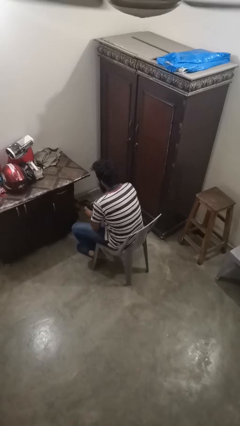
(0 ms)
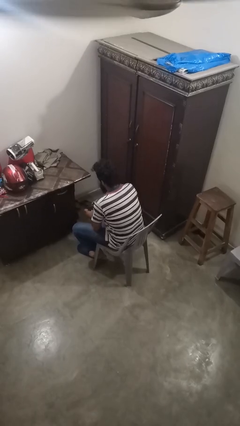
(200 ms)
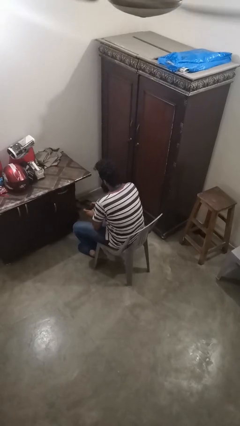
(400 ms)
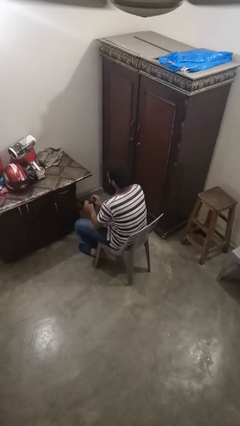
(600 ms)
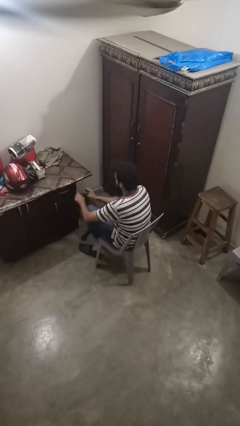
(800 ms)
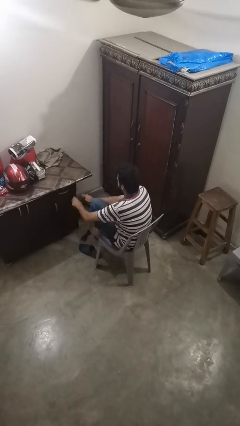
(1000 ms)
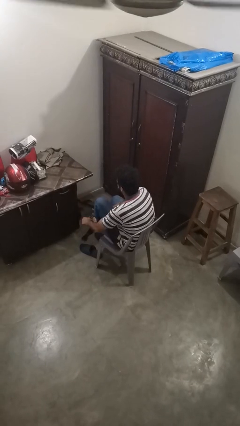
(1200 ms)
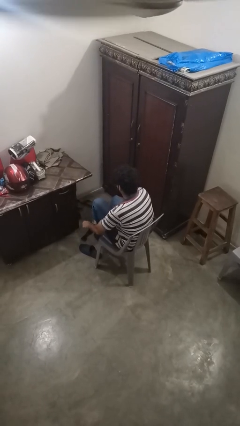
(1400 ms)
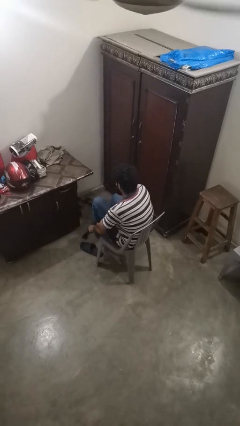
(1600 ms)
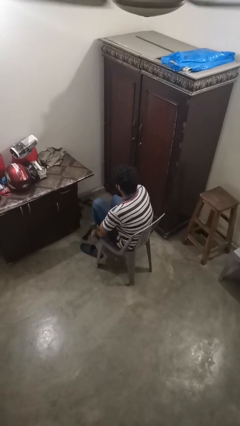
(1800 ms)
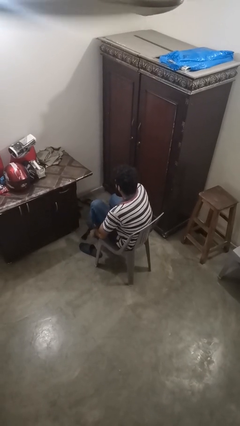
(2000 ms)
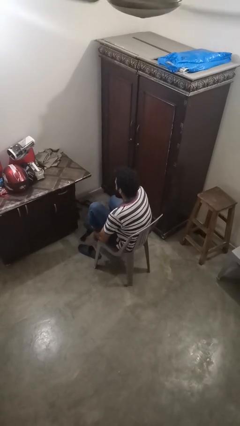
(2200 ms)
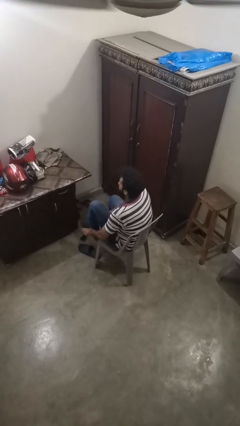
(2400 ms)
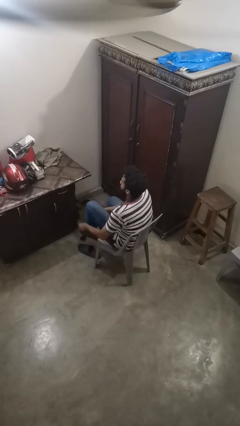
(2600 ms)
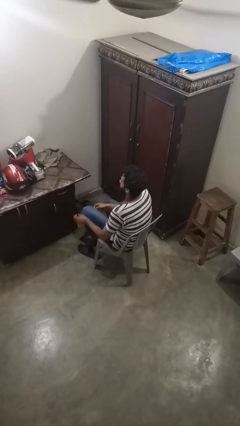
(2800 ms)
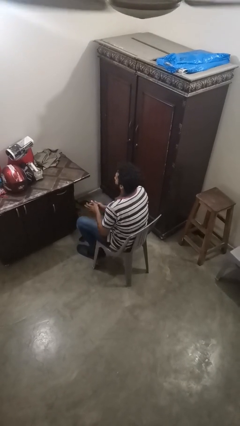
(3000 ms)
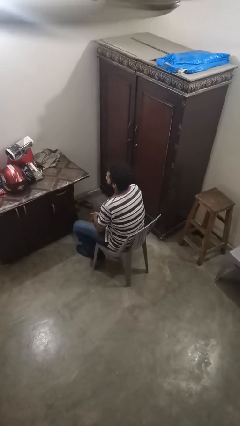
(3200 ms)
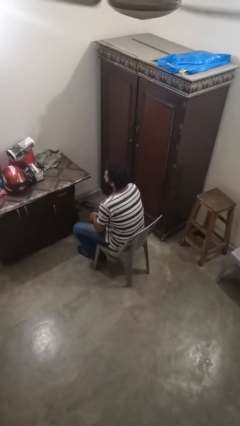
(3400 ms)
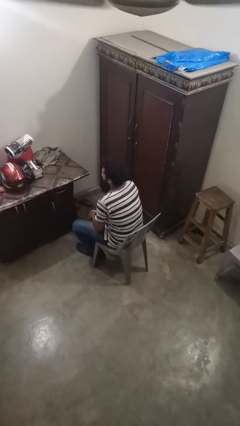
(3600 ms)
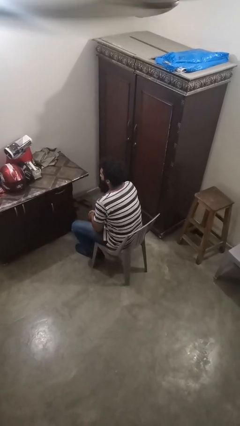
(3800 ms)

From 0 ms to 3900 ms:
person puts on socks

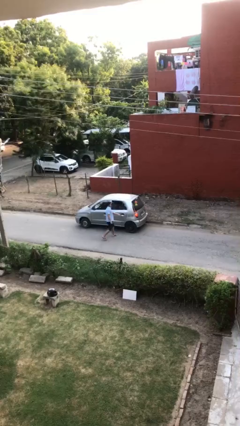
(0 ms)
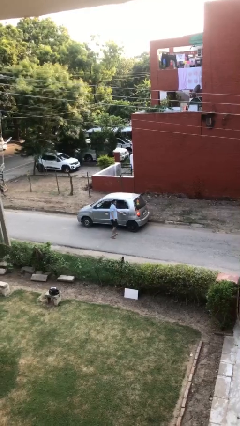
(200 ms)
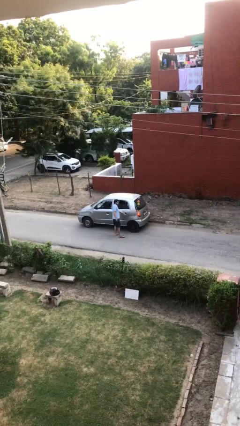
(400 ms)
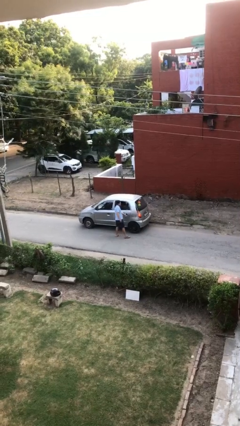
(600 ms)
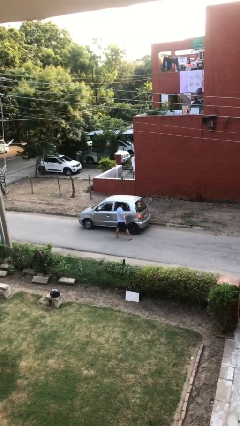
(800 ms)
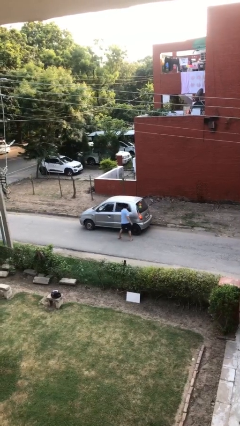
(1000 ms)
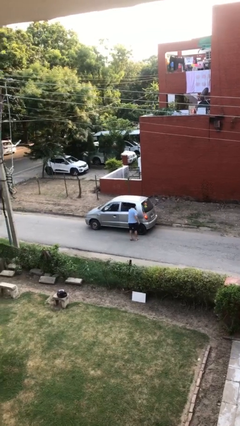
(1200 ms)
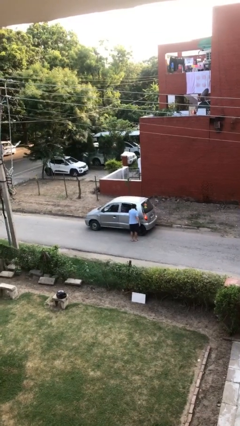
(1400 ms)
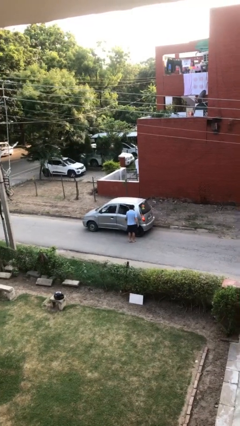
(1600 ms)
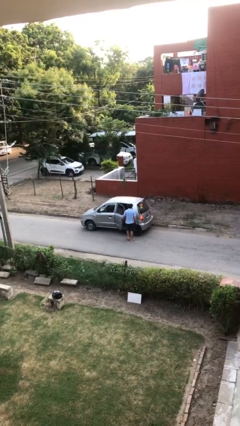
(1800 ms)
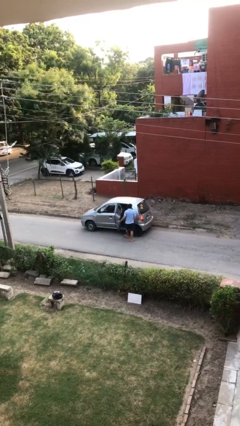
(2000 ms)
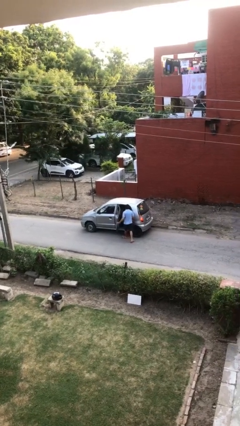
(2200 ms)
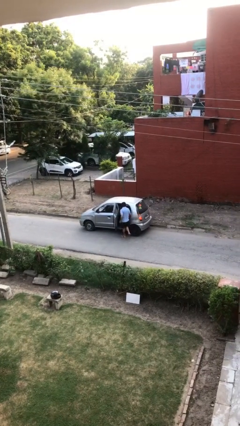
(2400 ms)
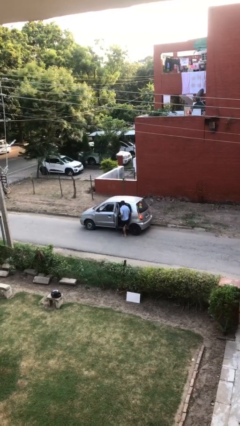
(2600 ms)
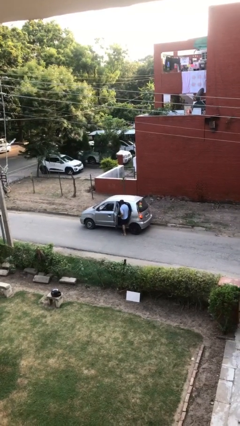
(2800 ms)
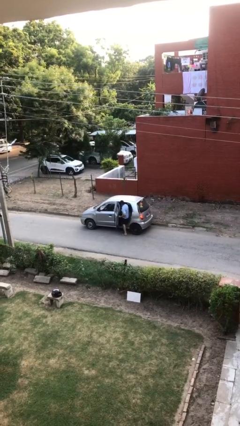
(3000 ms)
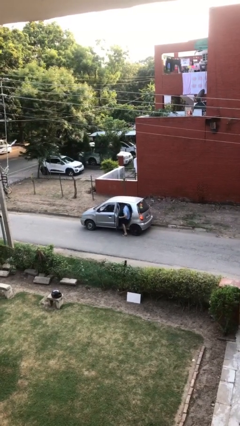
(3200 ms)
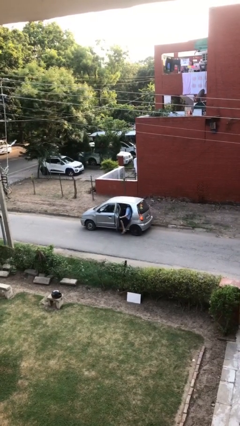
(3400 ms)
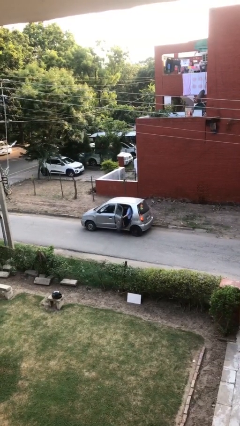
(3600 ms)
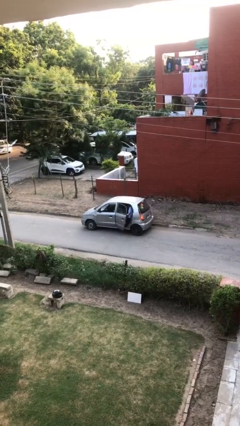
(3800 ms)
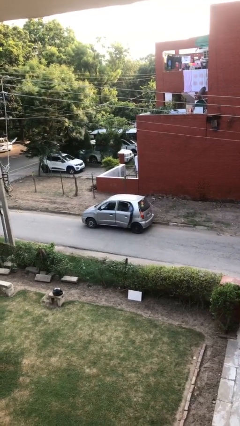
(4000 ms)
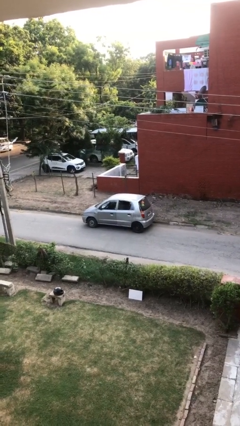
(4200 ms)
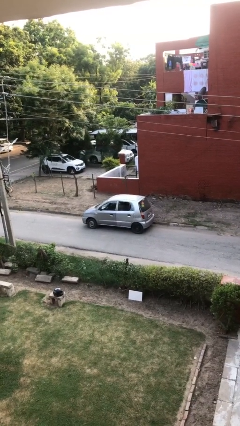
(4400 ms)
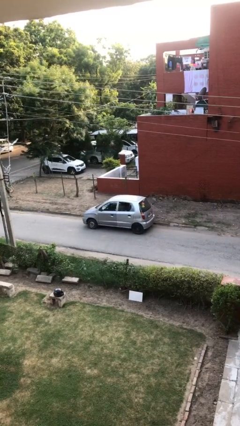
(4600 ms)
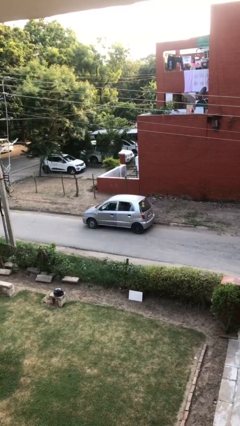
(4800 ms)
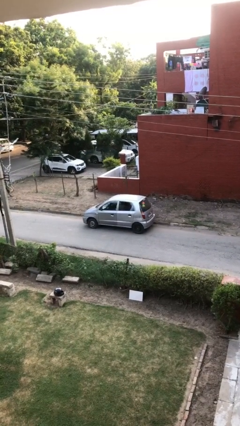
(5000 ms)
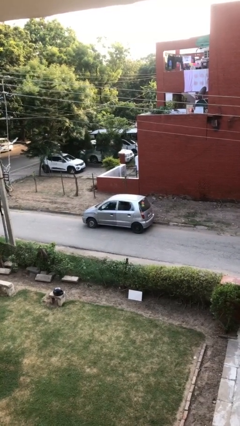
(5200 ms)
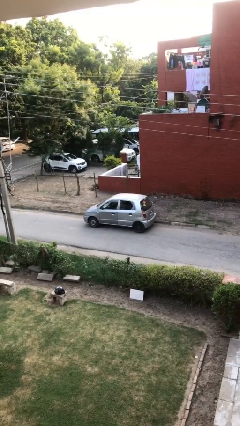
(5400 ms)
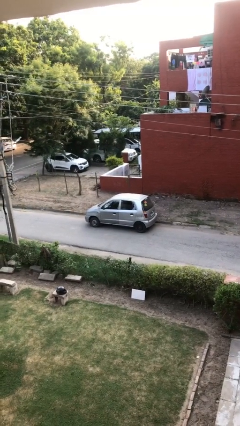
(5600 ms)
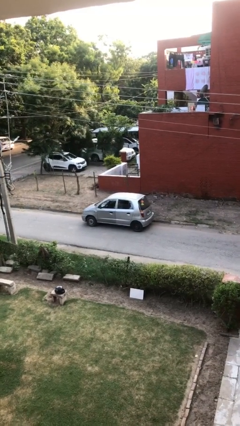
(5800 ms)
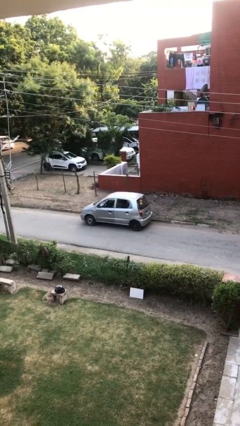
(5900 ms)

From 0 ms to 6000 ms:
car picks up person

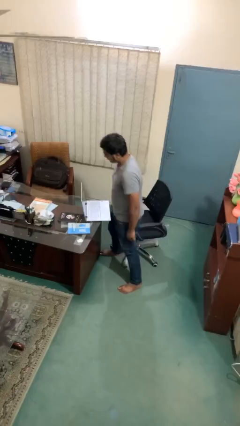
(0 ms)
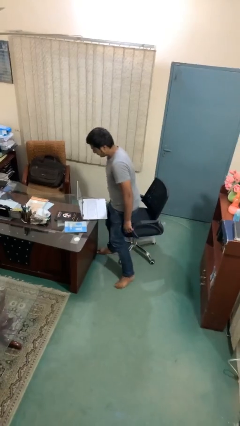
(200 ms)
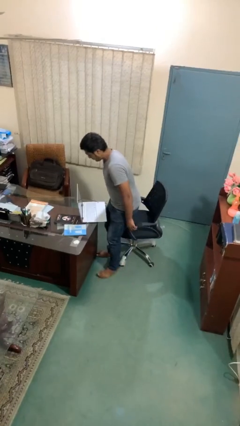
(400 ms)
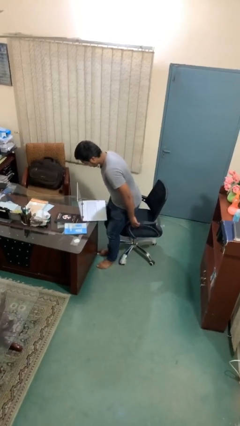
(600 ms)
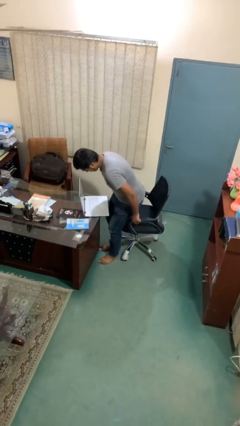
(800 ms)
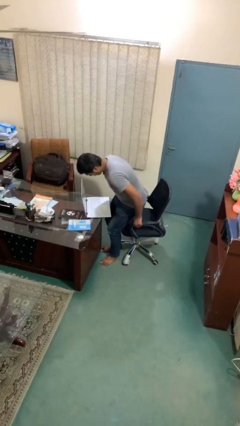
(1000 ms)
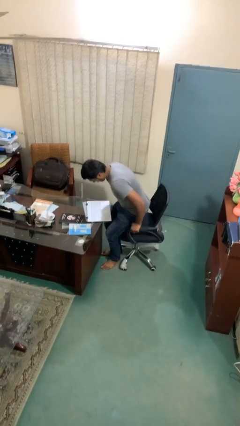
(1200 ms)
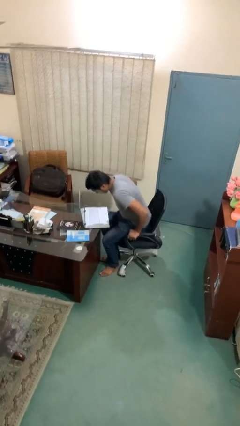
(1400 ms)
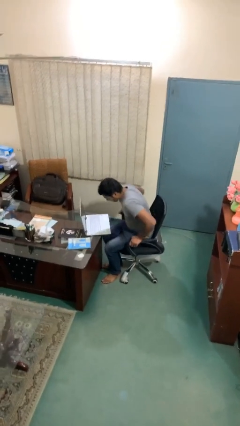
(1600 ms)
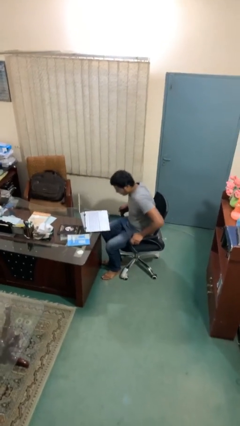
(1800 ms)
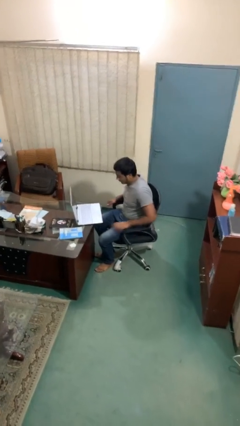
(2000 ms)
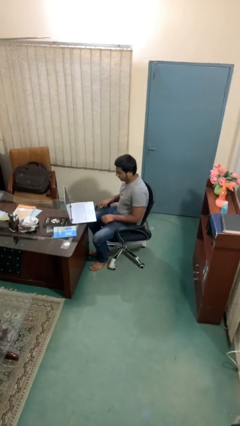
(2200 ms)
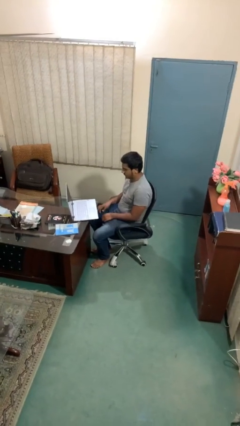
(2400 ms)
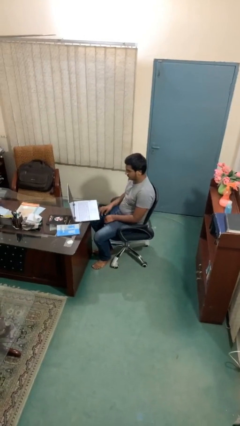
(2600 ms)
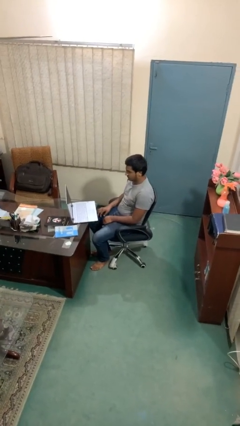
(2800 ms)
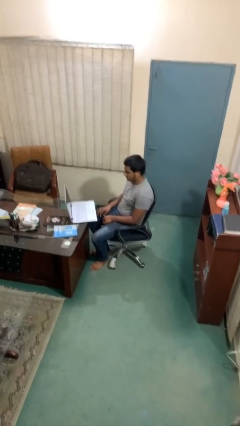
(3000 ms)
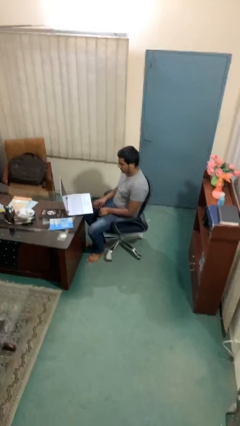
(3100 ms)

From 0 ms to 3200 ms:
person sits down

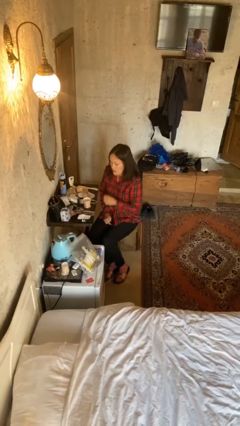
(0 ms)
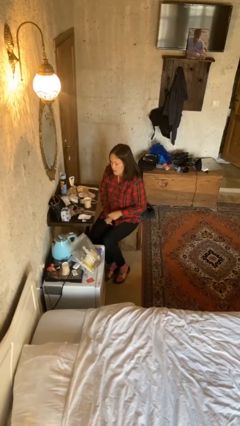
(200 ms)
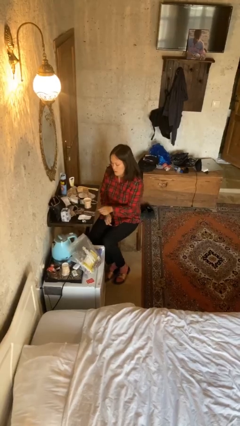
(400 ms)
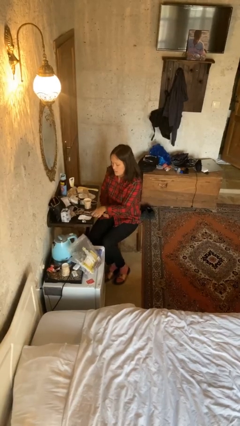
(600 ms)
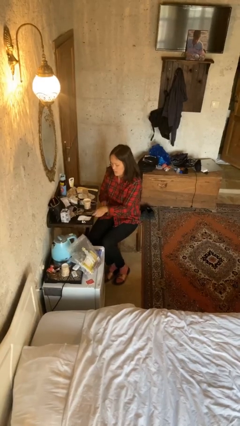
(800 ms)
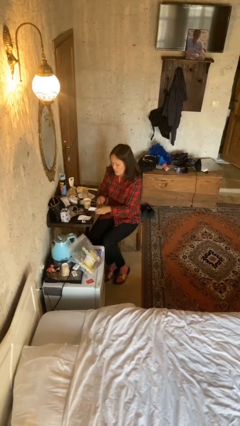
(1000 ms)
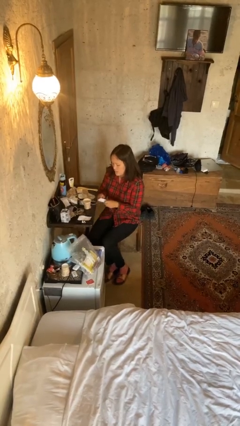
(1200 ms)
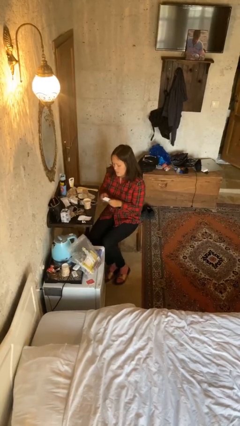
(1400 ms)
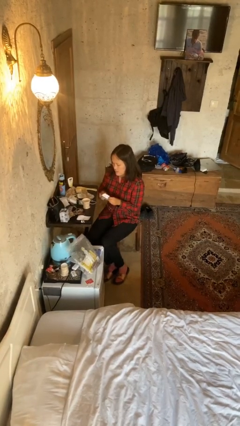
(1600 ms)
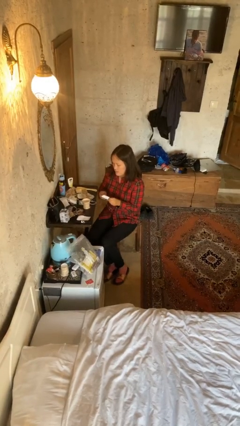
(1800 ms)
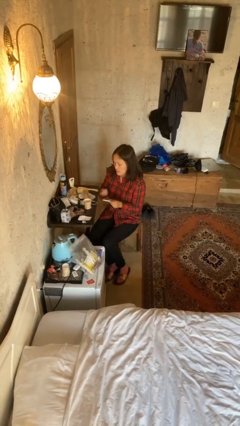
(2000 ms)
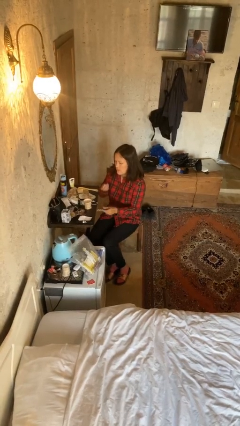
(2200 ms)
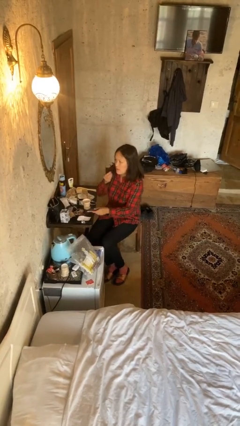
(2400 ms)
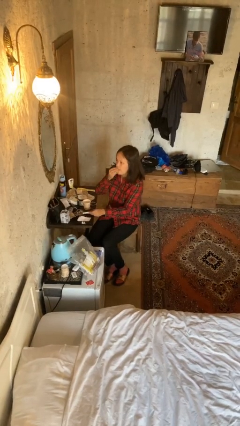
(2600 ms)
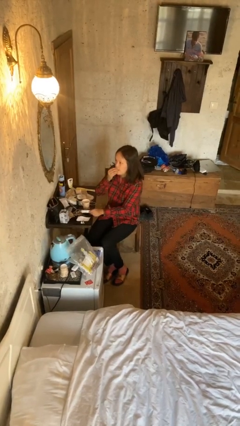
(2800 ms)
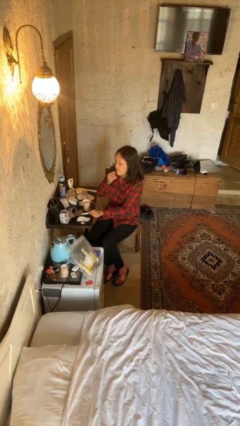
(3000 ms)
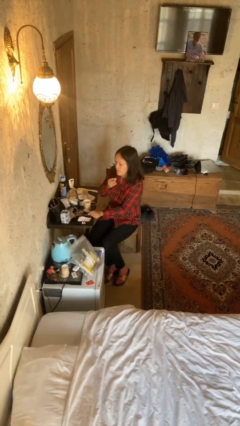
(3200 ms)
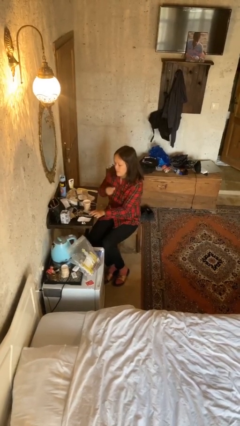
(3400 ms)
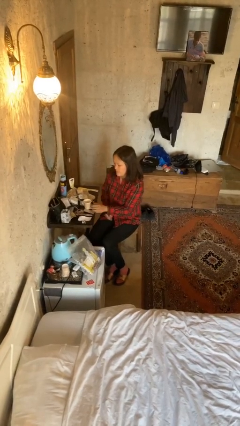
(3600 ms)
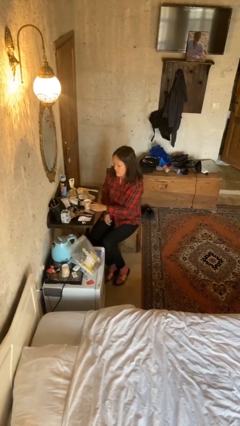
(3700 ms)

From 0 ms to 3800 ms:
person takes medicine pills

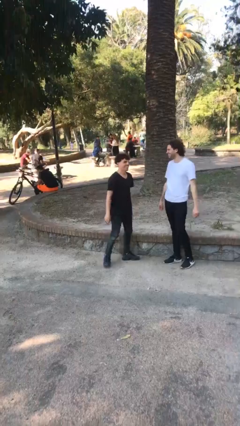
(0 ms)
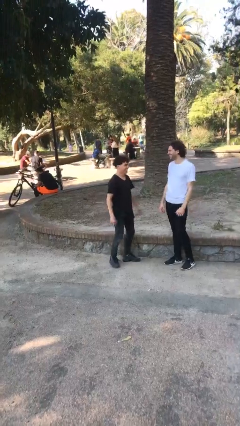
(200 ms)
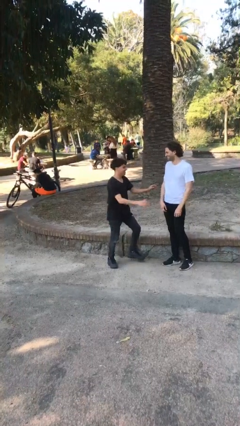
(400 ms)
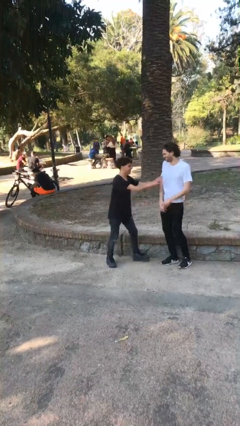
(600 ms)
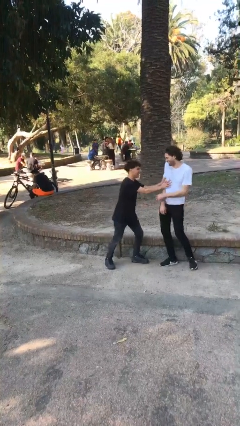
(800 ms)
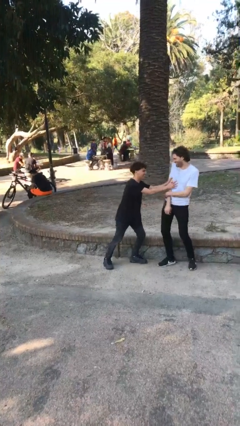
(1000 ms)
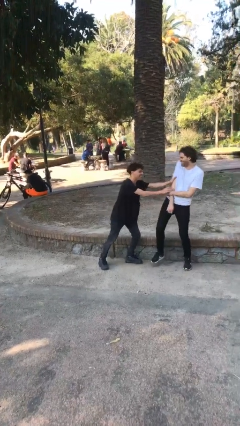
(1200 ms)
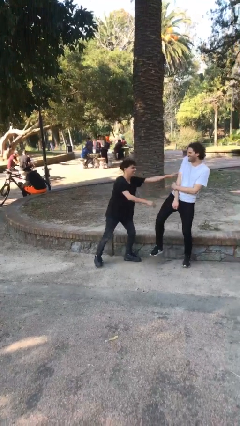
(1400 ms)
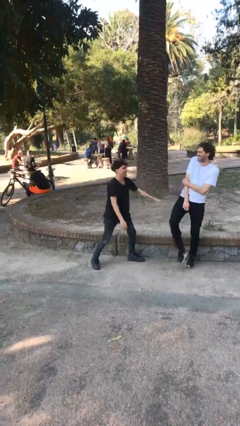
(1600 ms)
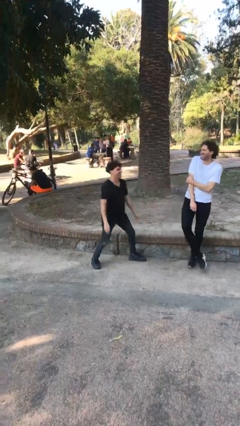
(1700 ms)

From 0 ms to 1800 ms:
person shoves person
